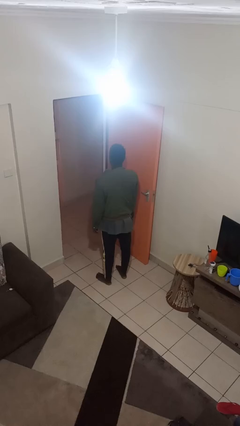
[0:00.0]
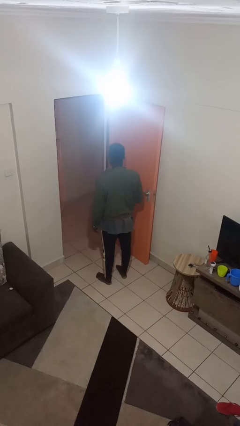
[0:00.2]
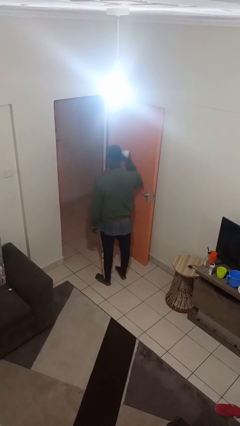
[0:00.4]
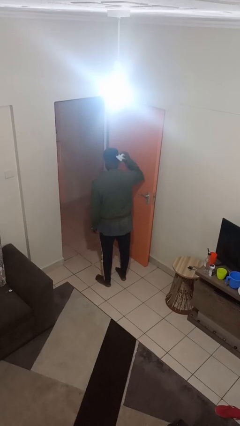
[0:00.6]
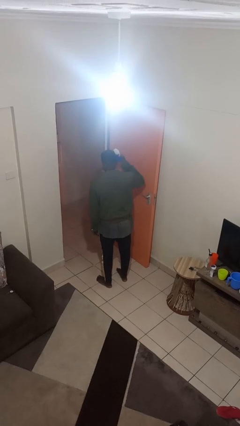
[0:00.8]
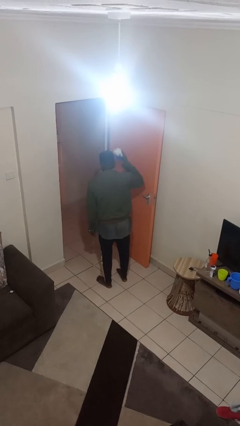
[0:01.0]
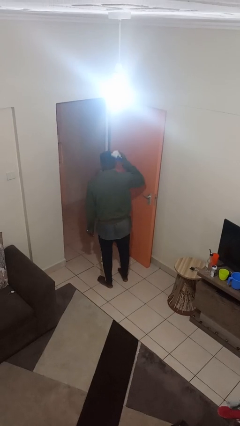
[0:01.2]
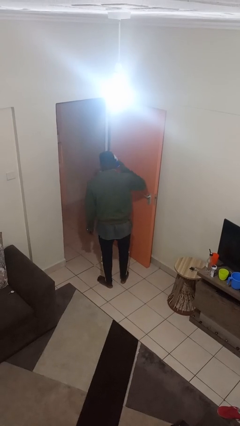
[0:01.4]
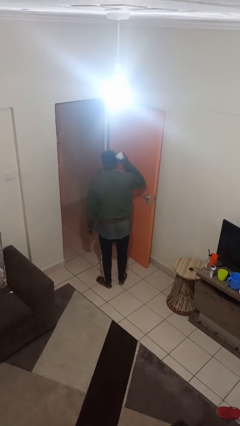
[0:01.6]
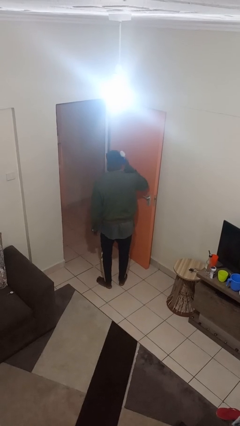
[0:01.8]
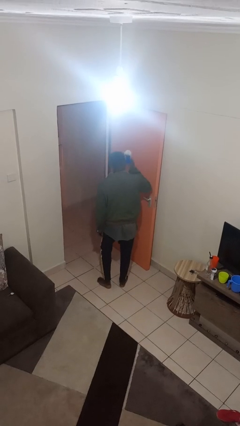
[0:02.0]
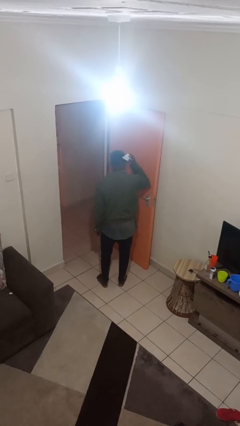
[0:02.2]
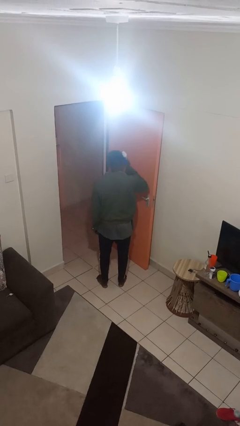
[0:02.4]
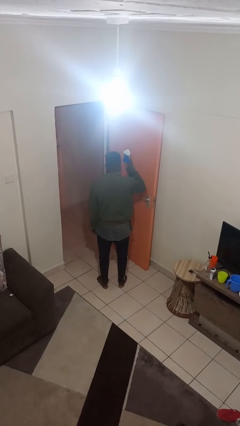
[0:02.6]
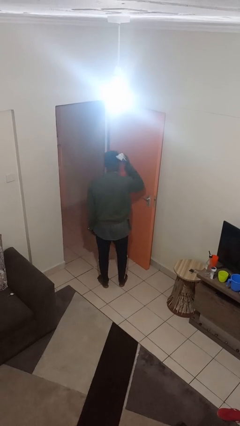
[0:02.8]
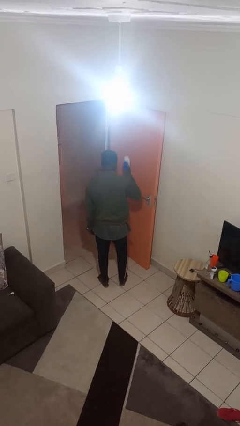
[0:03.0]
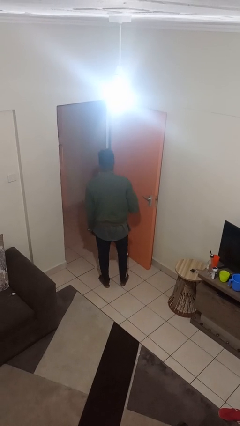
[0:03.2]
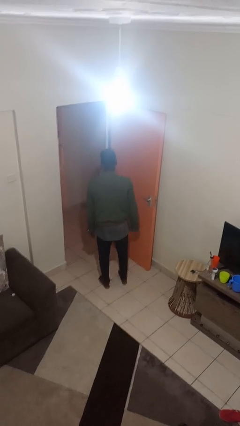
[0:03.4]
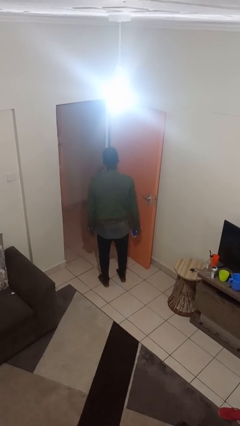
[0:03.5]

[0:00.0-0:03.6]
person brushes hair

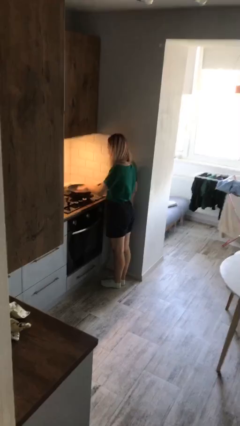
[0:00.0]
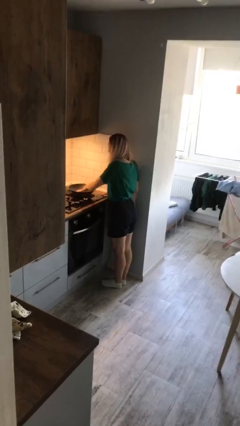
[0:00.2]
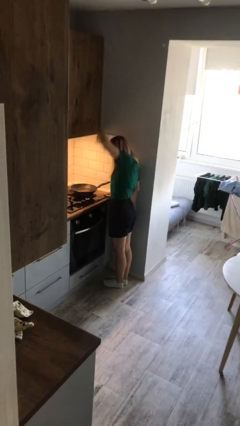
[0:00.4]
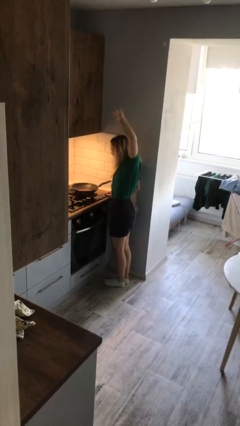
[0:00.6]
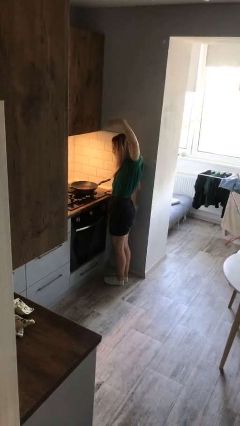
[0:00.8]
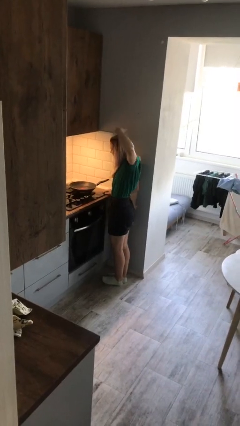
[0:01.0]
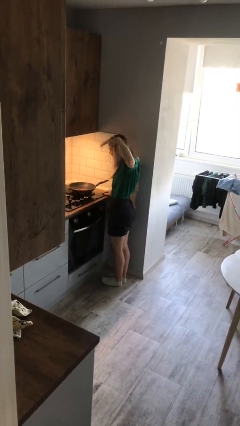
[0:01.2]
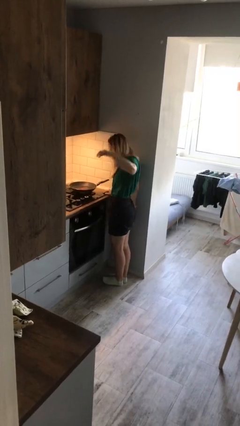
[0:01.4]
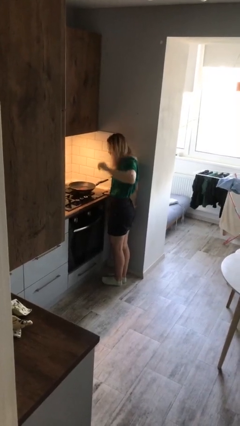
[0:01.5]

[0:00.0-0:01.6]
person burns hand

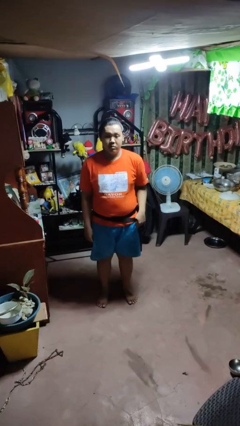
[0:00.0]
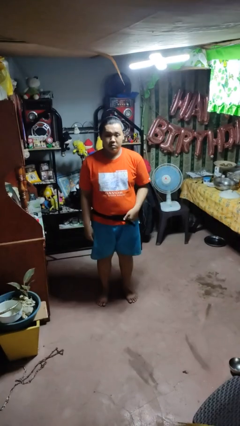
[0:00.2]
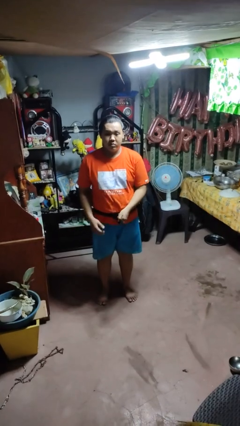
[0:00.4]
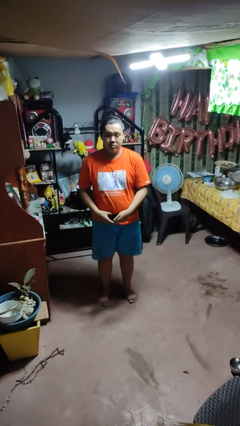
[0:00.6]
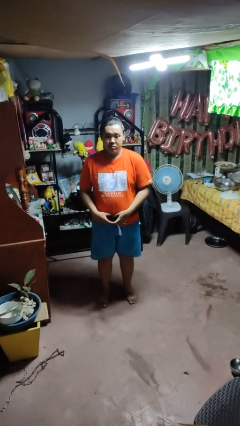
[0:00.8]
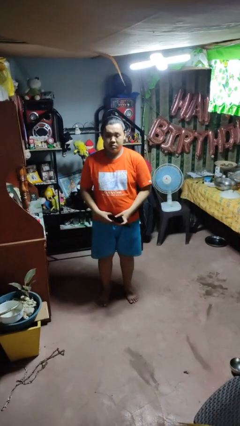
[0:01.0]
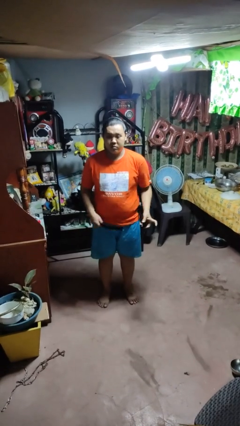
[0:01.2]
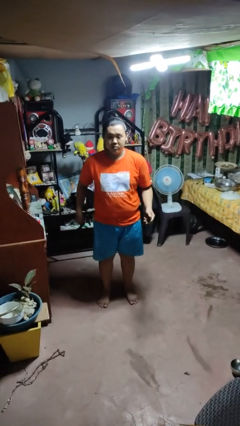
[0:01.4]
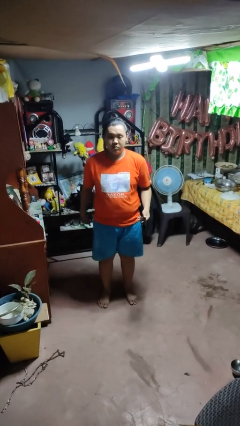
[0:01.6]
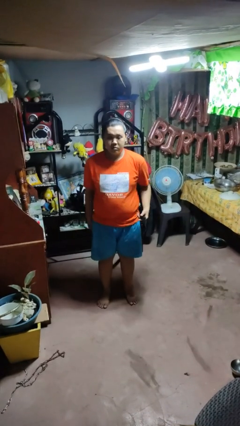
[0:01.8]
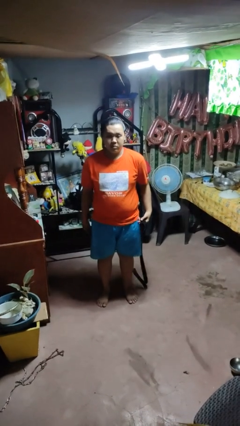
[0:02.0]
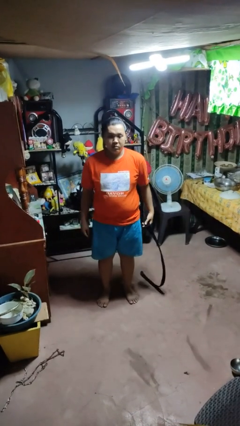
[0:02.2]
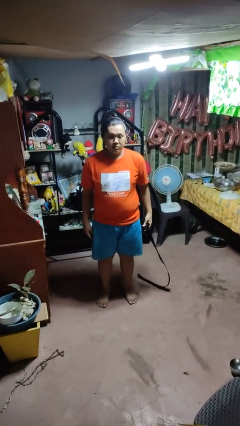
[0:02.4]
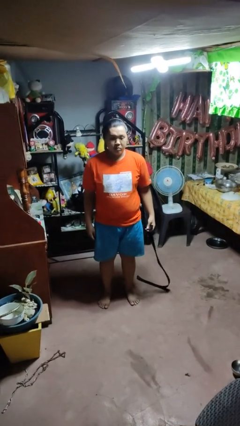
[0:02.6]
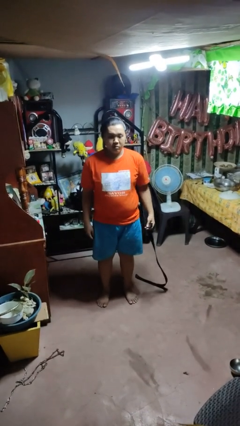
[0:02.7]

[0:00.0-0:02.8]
person takes off belt

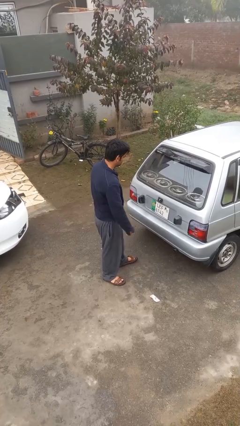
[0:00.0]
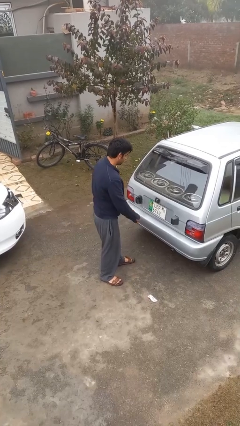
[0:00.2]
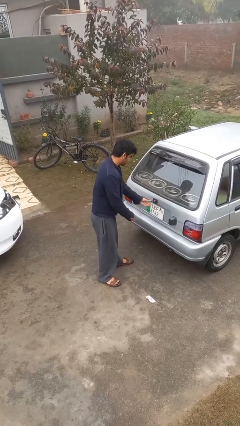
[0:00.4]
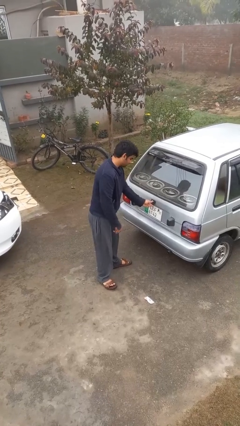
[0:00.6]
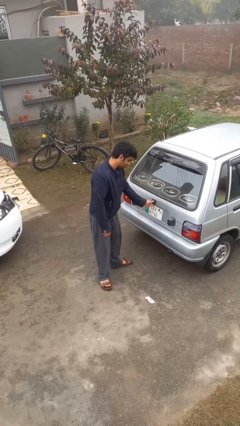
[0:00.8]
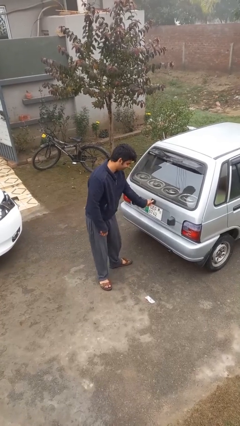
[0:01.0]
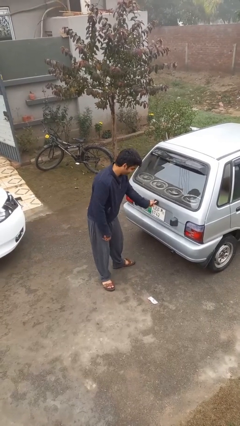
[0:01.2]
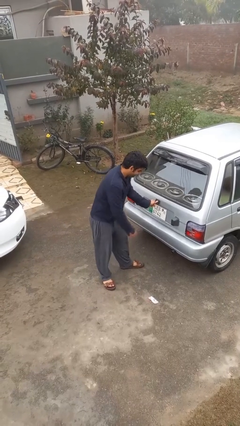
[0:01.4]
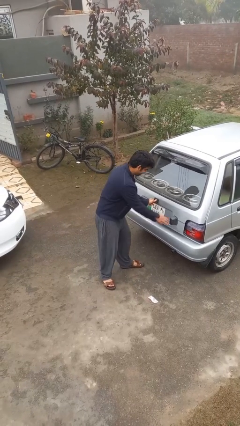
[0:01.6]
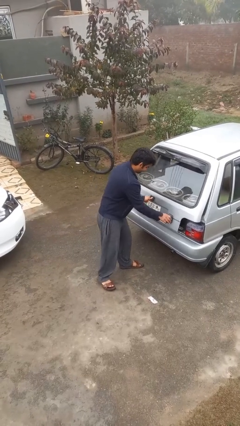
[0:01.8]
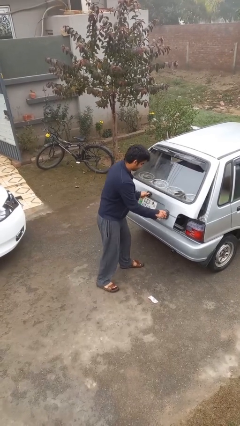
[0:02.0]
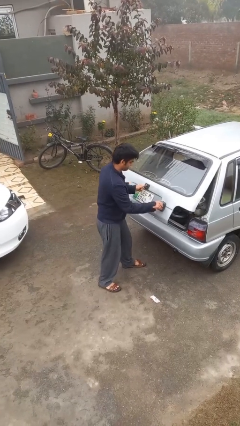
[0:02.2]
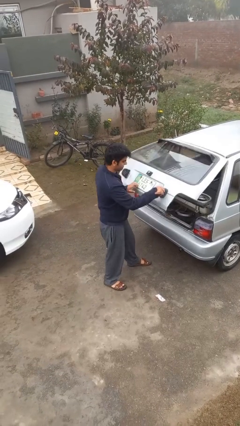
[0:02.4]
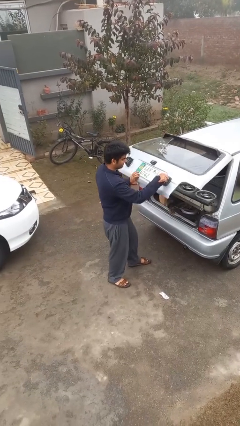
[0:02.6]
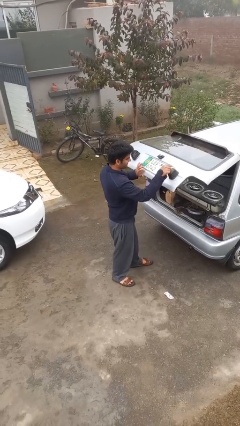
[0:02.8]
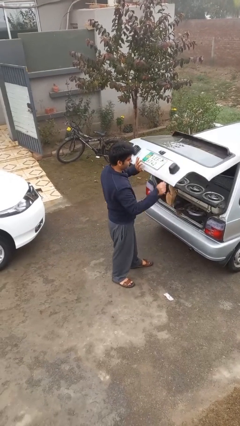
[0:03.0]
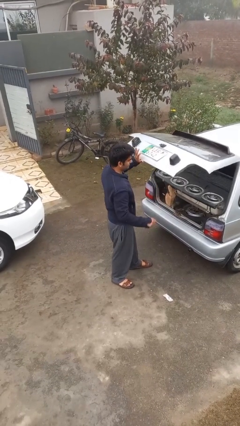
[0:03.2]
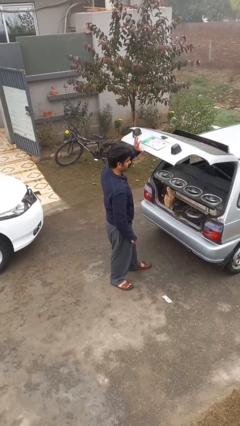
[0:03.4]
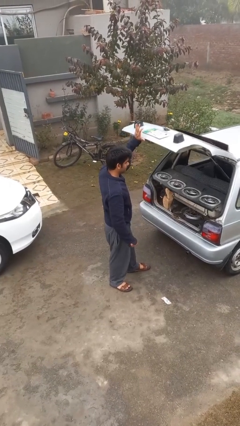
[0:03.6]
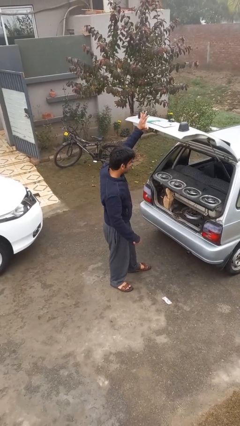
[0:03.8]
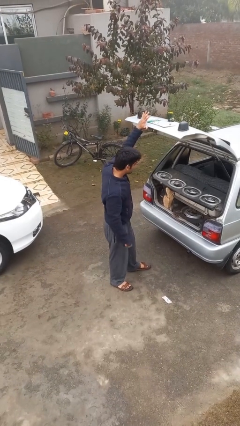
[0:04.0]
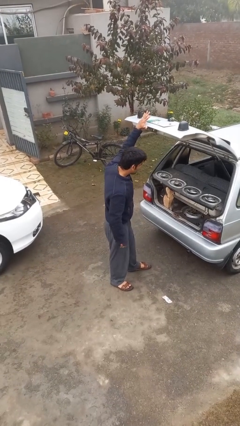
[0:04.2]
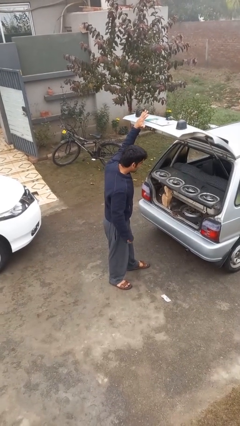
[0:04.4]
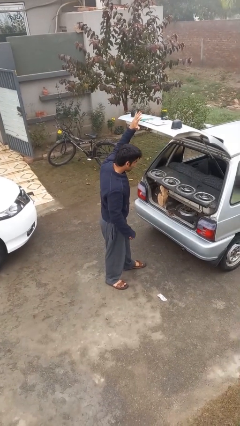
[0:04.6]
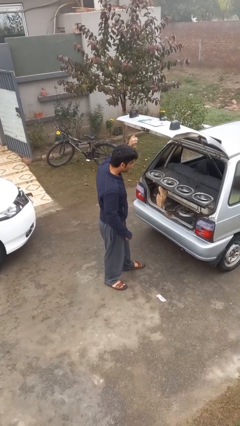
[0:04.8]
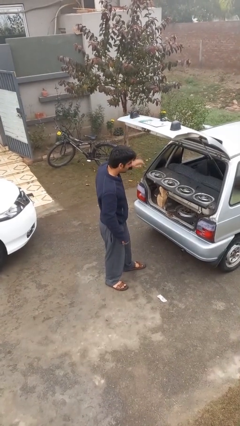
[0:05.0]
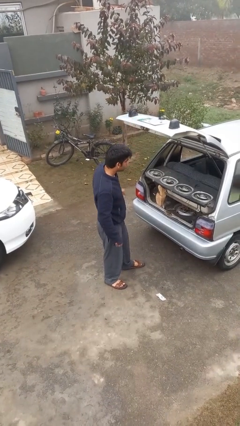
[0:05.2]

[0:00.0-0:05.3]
person opens car trunk

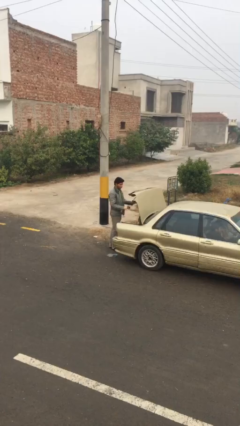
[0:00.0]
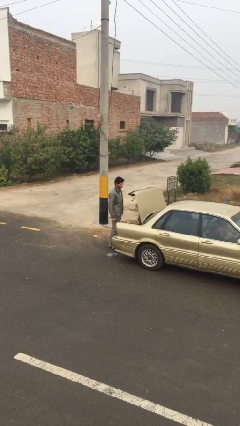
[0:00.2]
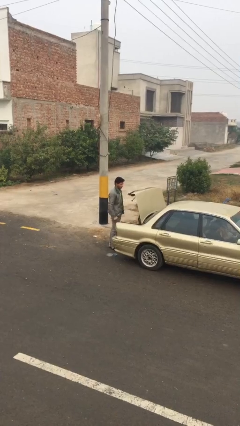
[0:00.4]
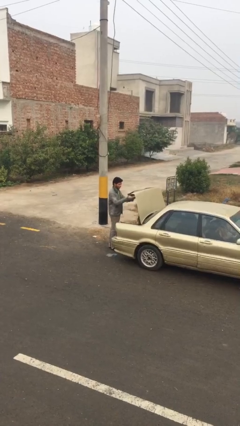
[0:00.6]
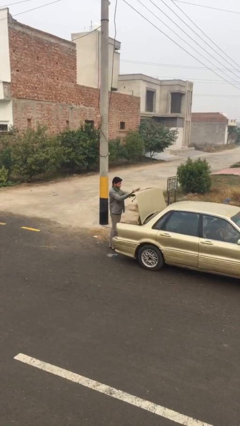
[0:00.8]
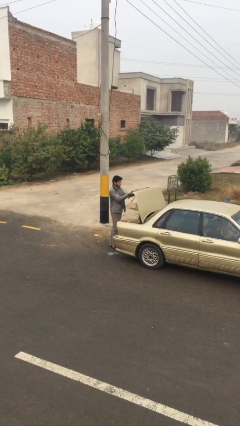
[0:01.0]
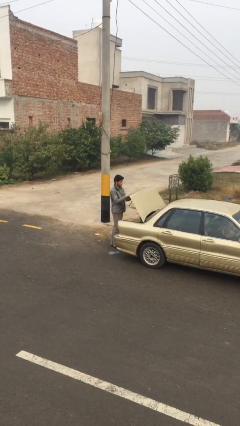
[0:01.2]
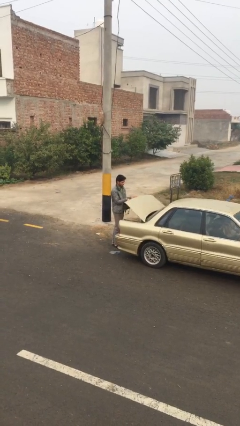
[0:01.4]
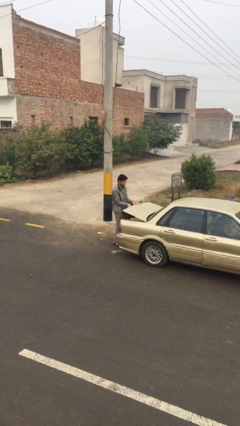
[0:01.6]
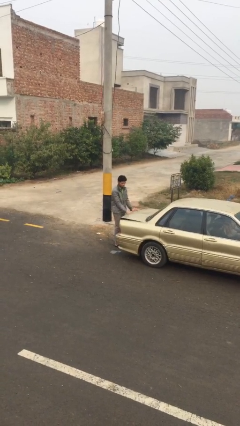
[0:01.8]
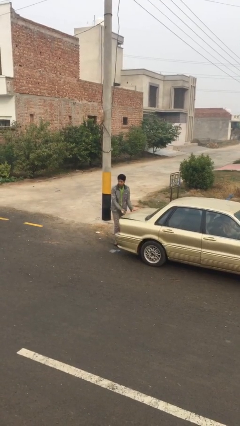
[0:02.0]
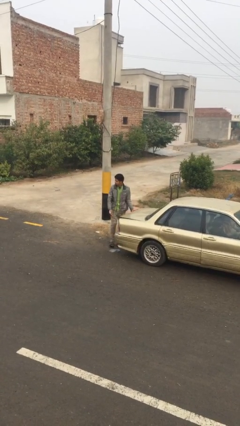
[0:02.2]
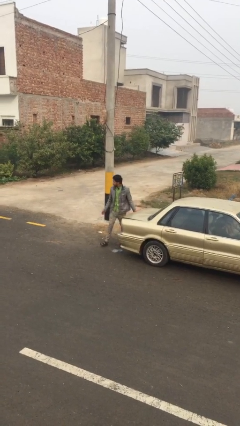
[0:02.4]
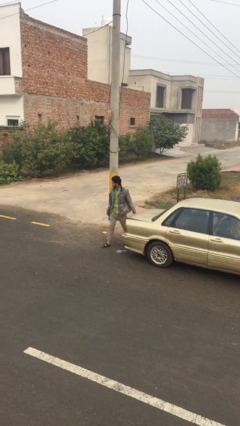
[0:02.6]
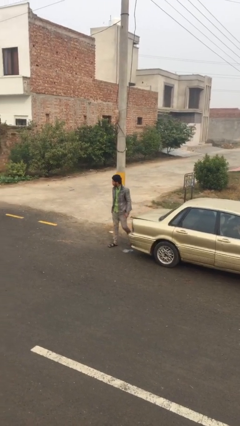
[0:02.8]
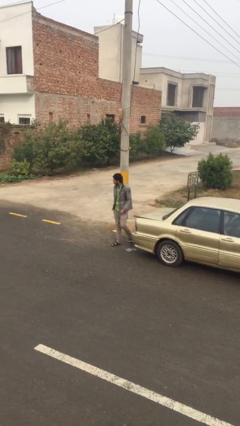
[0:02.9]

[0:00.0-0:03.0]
person closes car trunk

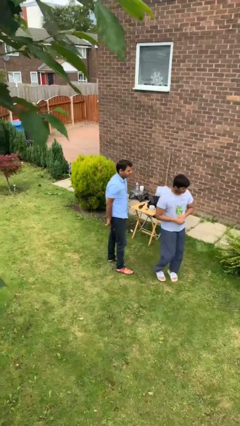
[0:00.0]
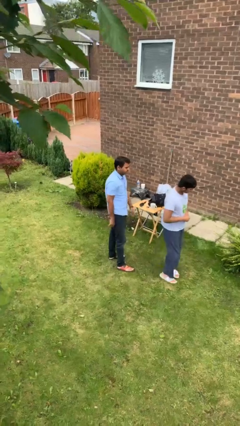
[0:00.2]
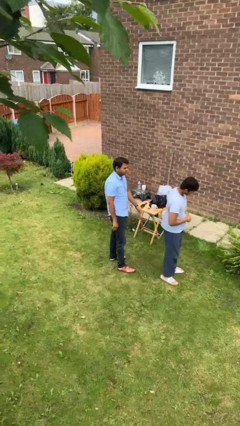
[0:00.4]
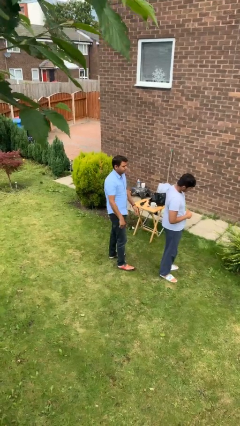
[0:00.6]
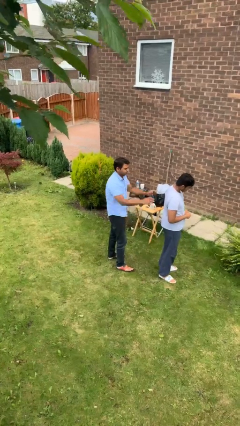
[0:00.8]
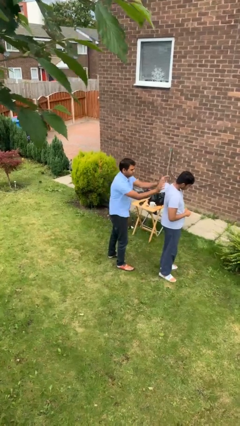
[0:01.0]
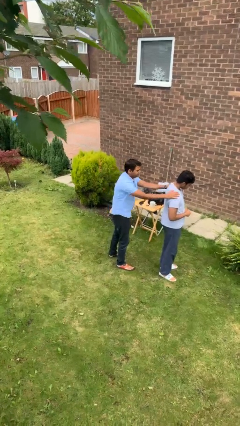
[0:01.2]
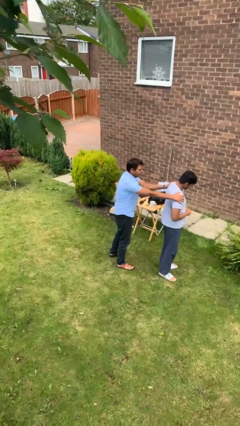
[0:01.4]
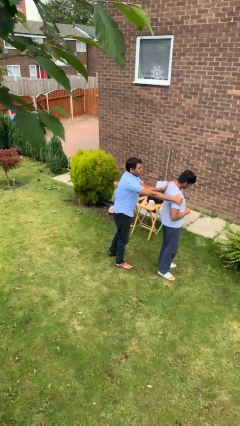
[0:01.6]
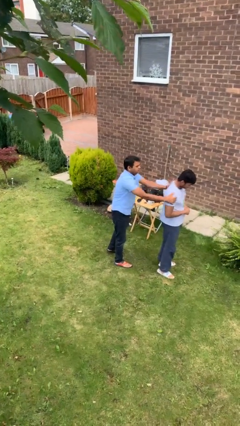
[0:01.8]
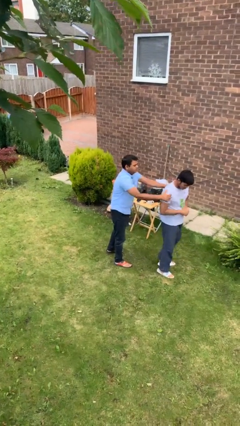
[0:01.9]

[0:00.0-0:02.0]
person grabs person by shoulder
